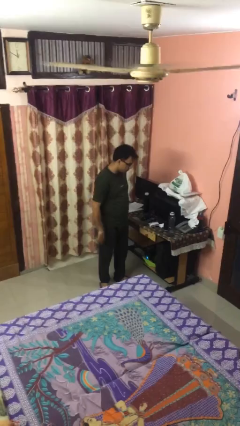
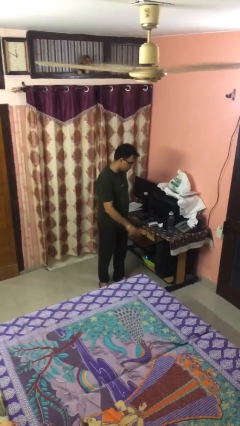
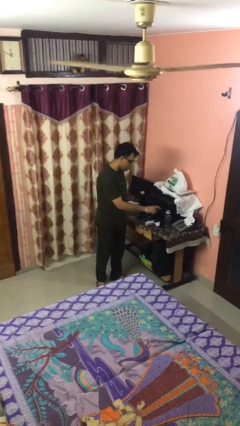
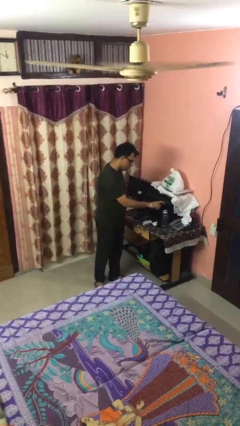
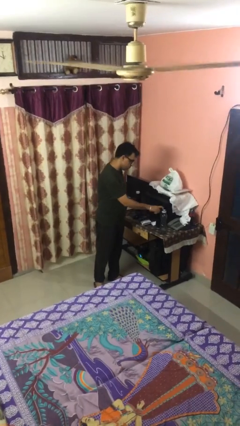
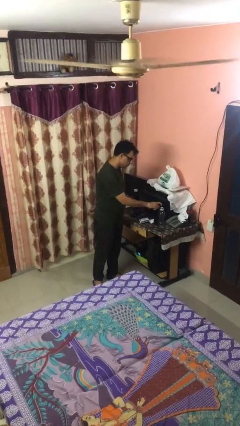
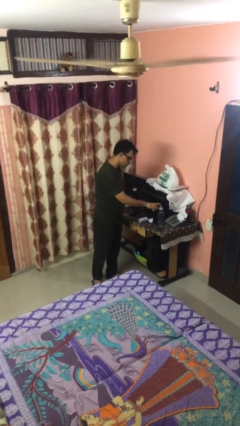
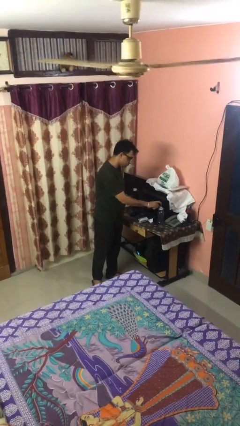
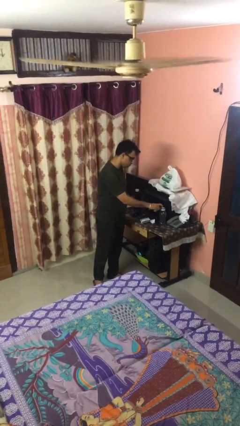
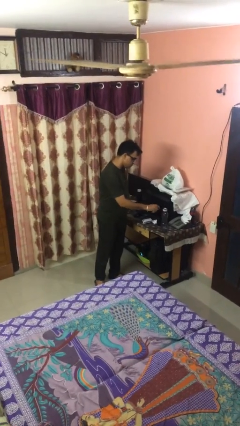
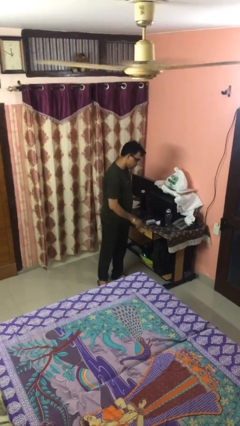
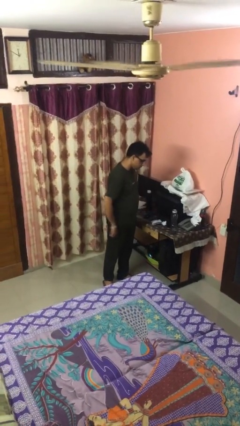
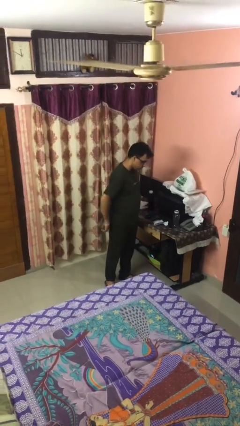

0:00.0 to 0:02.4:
person taps object with finger

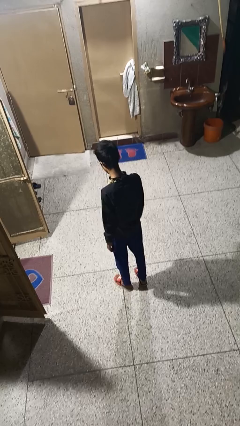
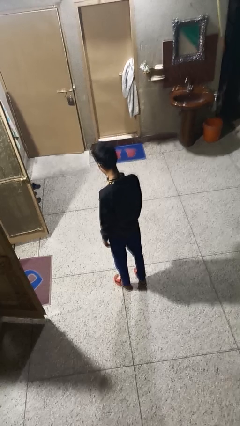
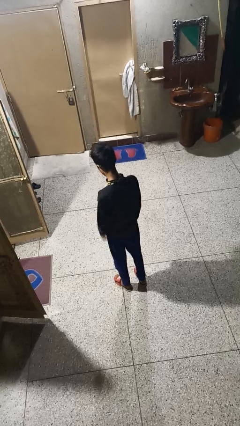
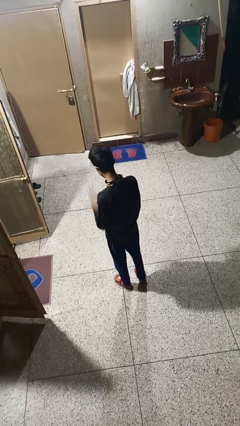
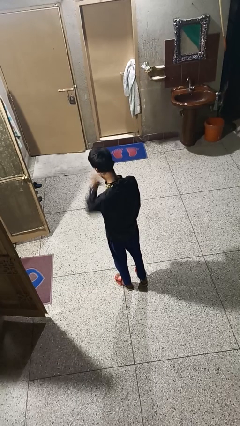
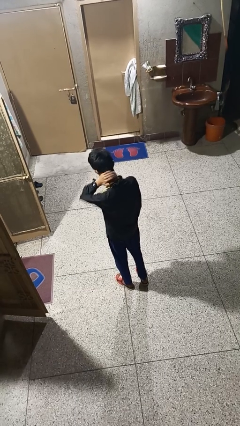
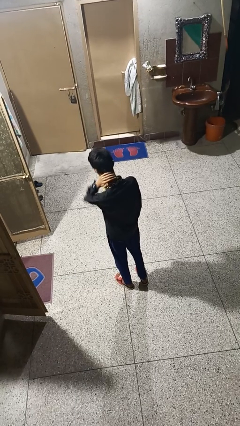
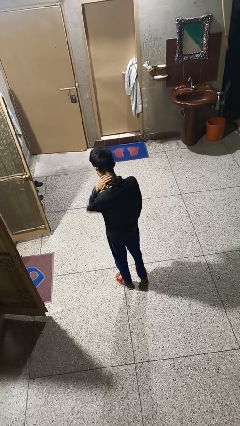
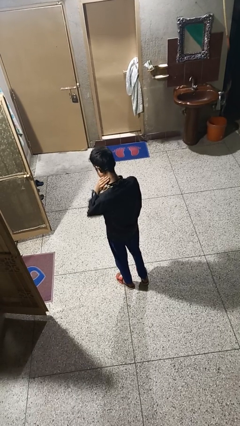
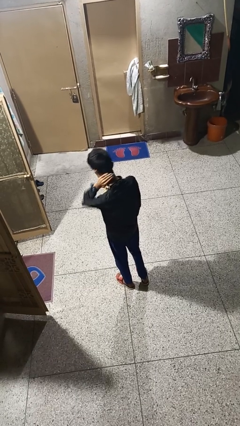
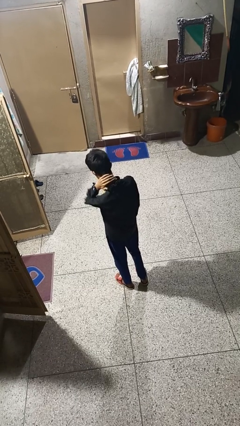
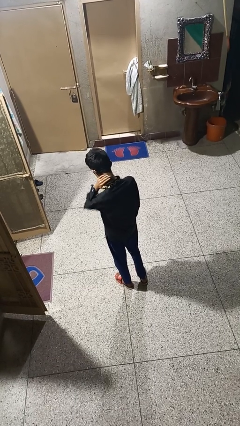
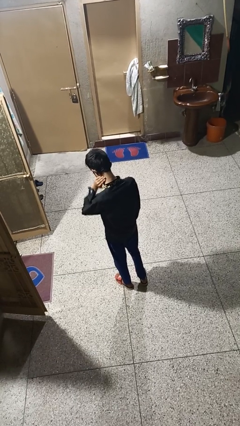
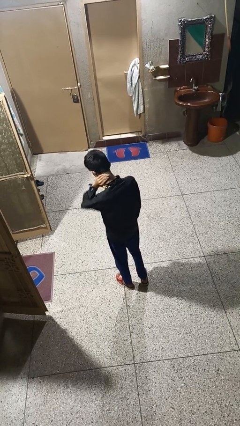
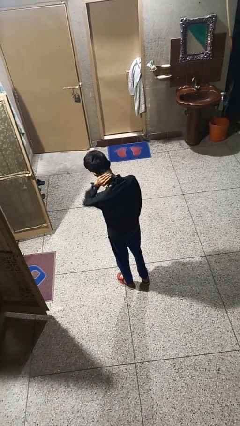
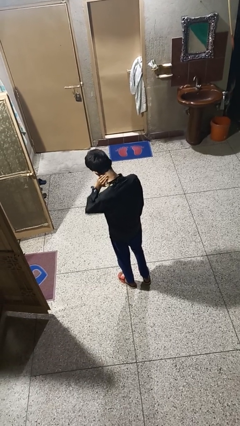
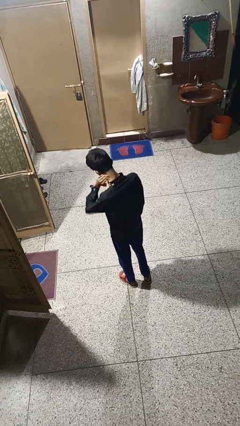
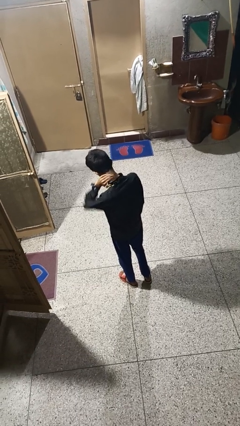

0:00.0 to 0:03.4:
person rubs neck

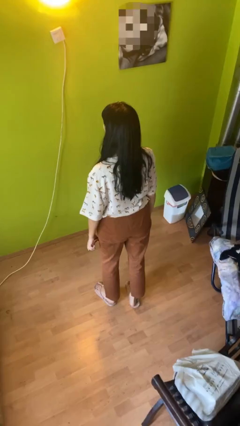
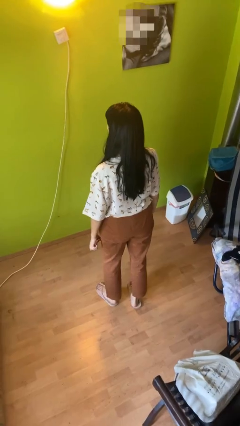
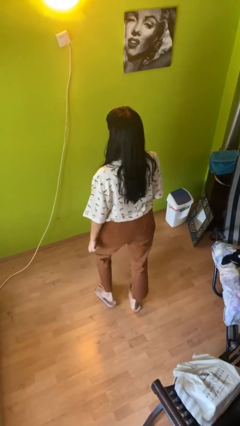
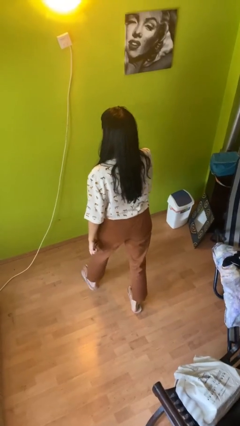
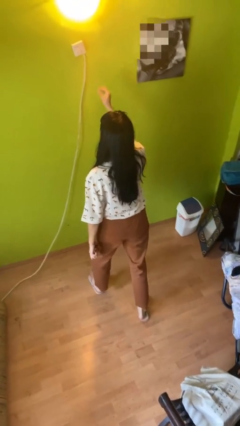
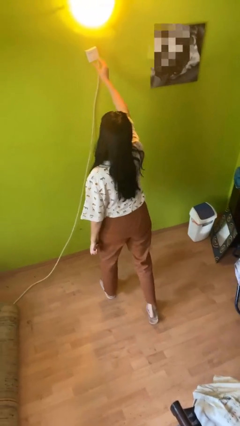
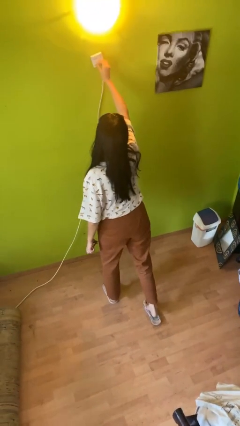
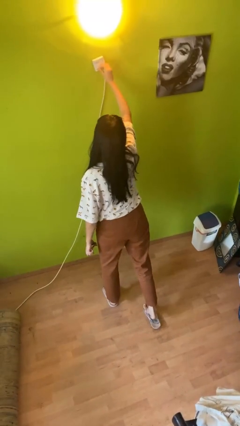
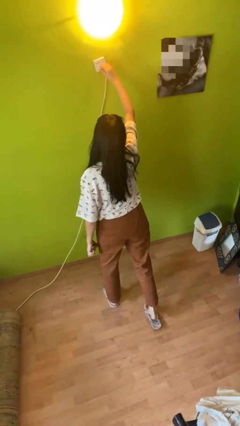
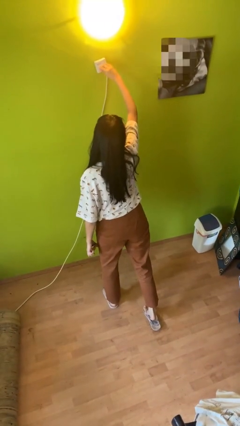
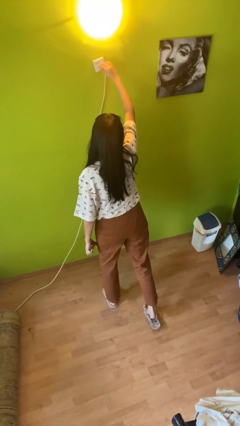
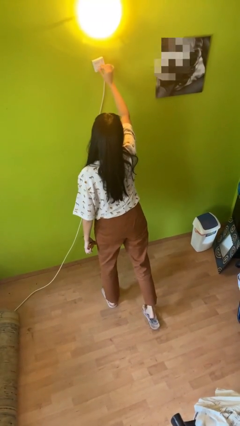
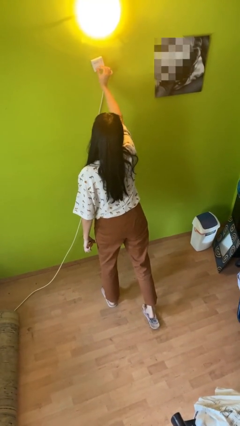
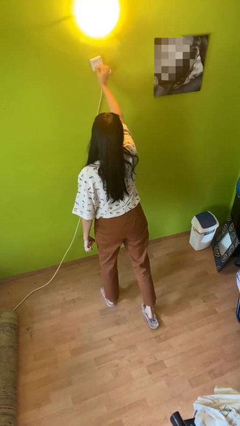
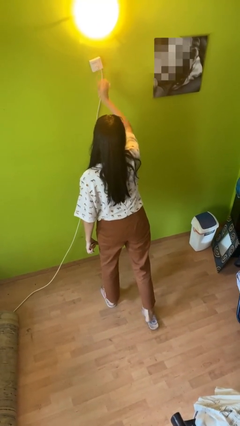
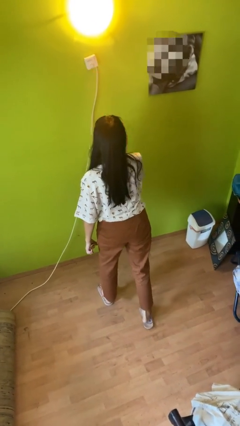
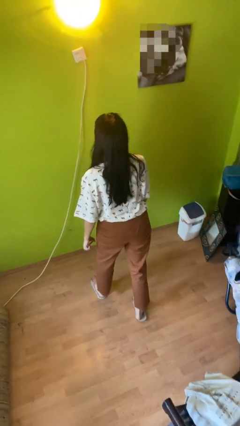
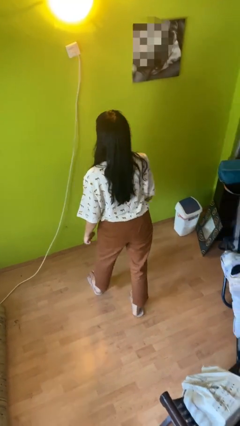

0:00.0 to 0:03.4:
person adjusts thermostat

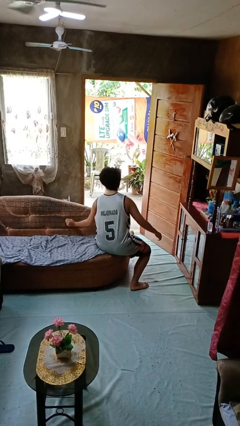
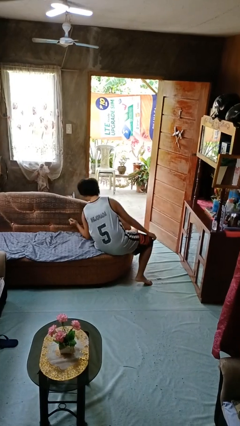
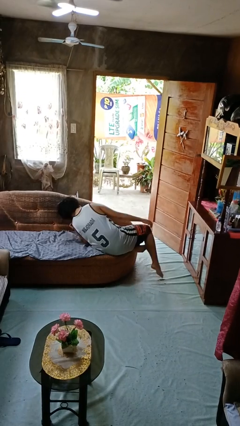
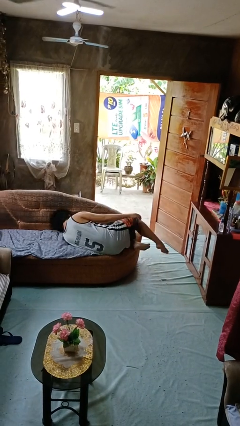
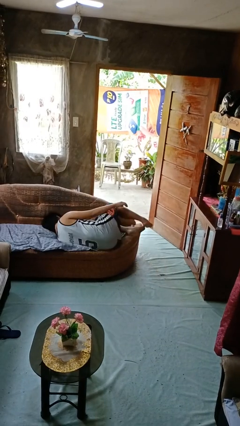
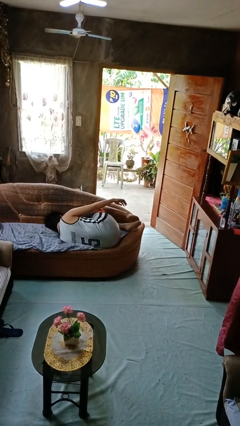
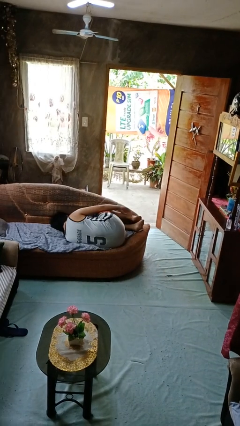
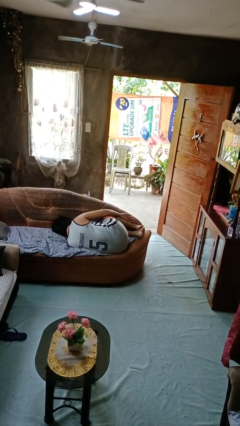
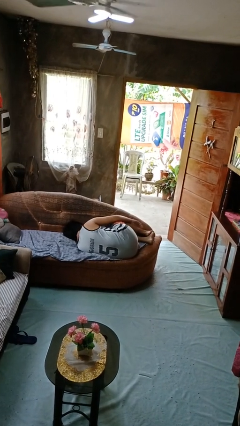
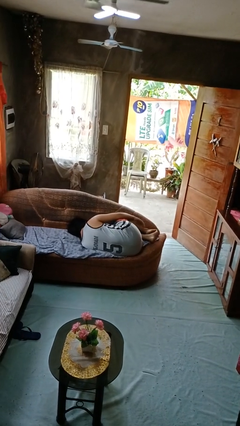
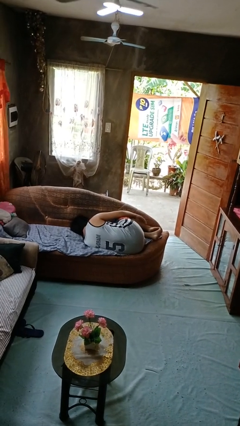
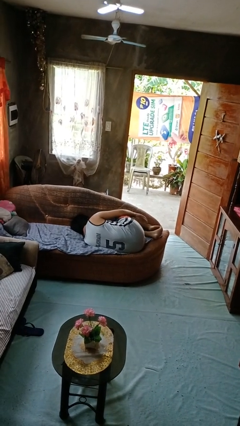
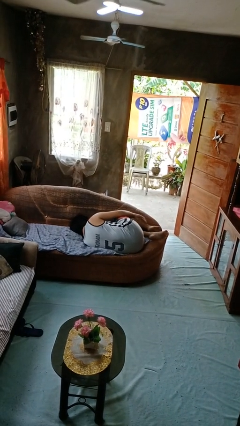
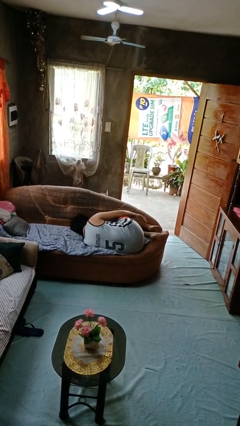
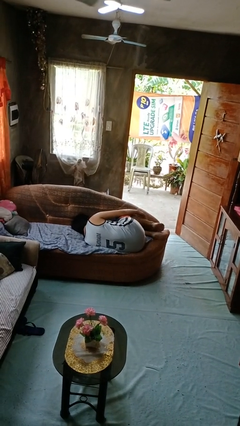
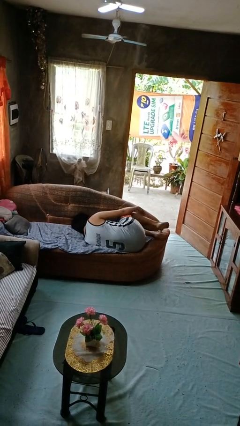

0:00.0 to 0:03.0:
person lies down on couch

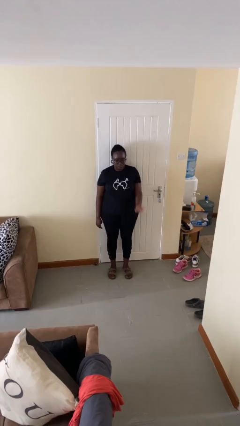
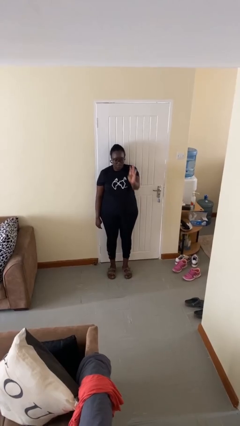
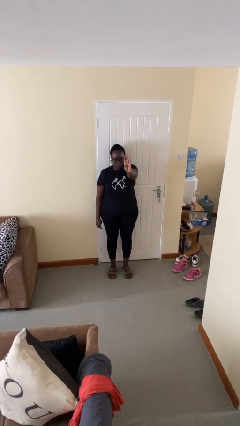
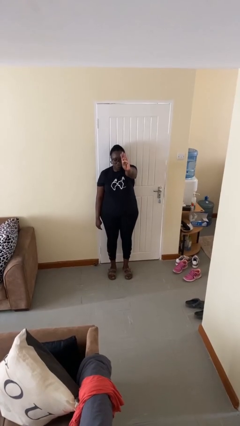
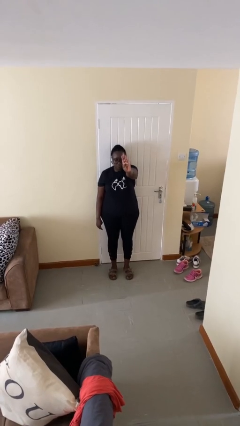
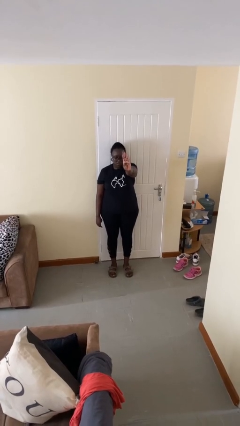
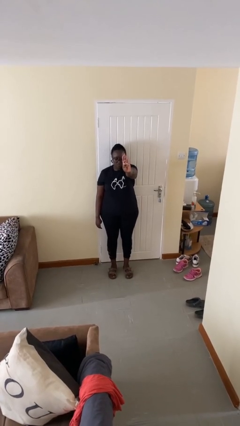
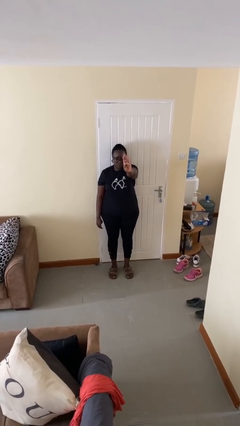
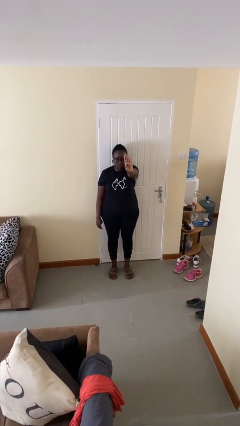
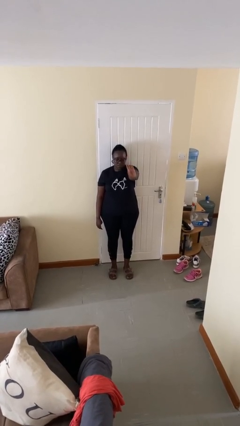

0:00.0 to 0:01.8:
person gestures number four

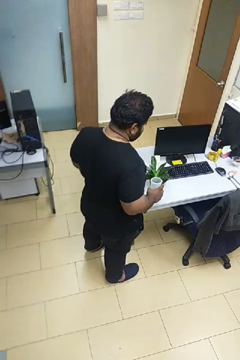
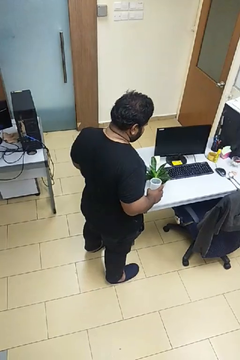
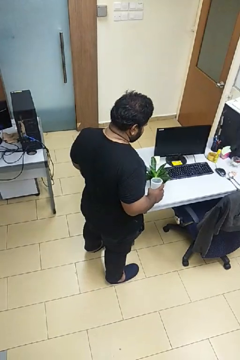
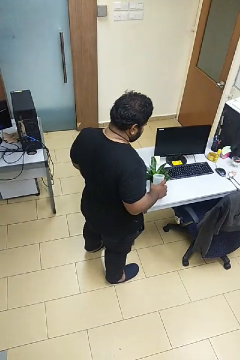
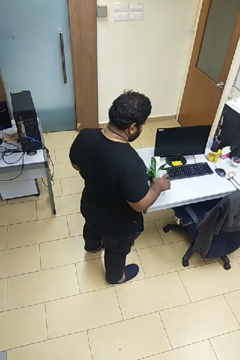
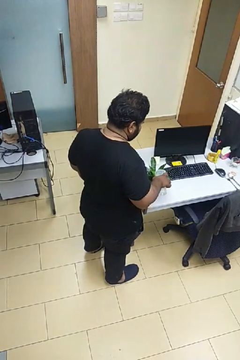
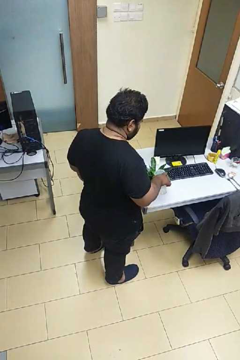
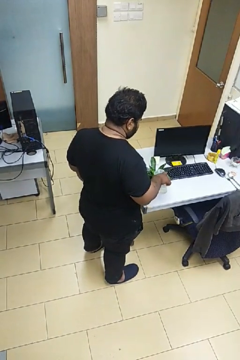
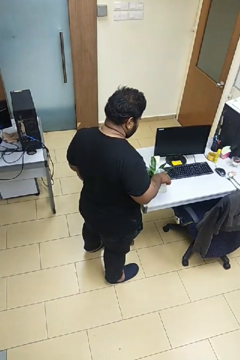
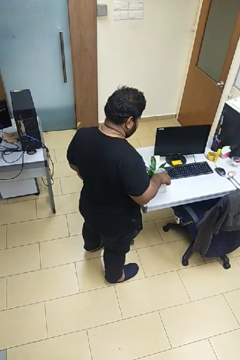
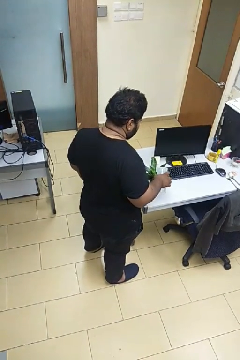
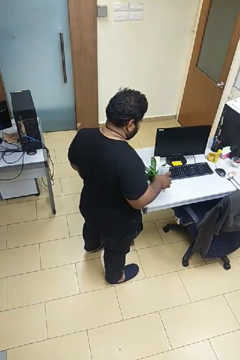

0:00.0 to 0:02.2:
person waters houseplant

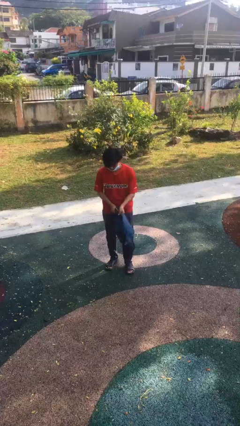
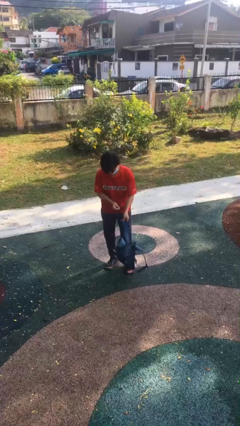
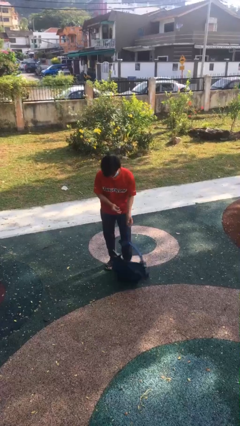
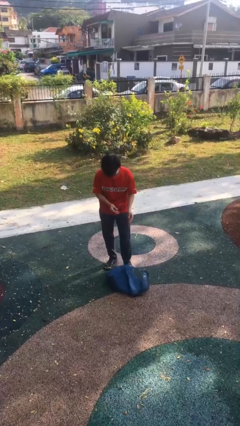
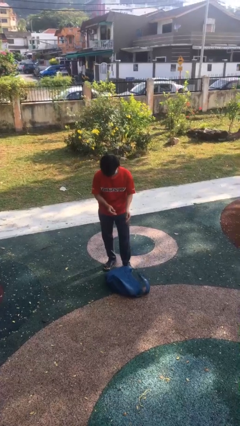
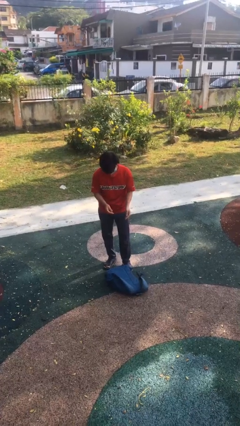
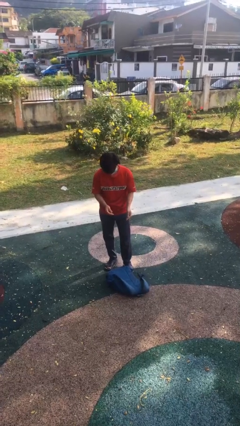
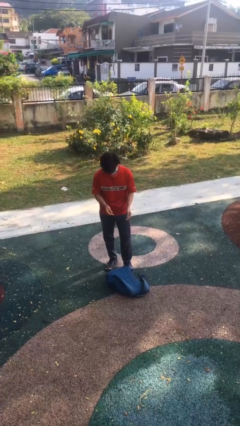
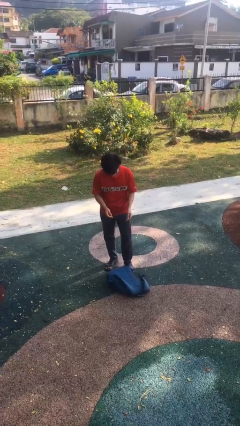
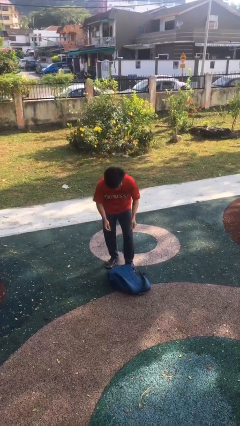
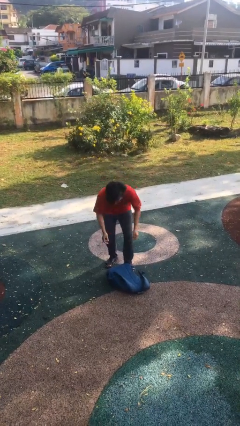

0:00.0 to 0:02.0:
person drops object
